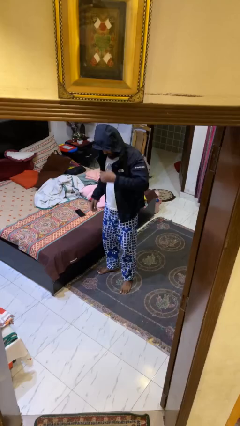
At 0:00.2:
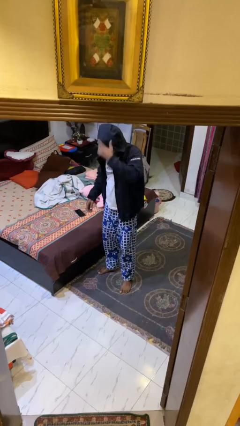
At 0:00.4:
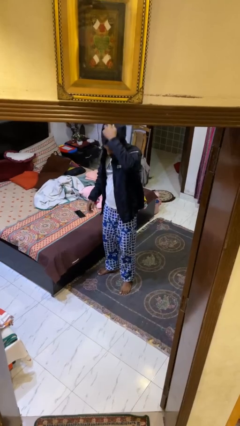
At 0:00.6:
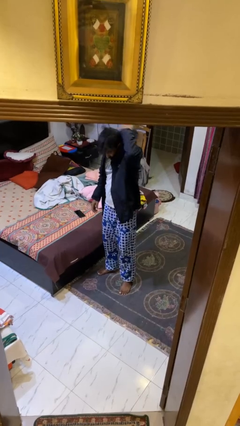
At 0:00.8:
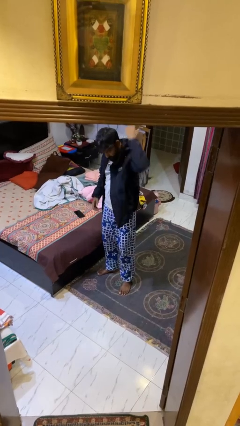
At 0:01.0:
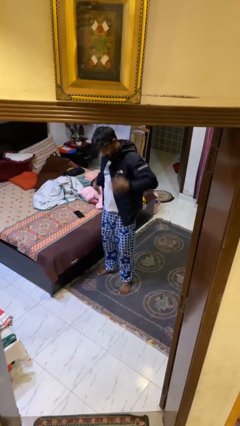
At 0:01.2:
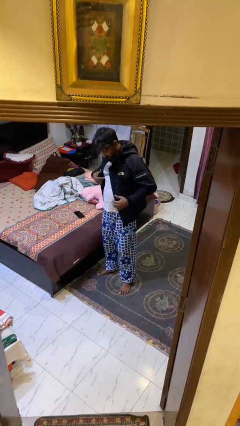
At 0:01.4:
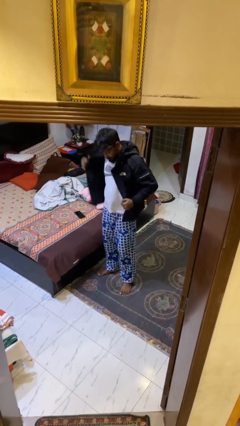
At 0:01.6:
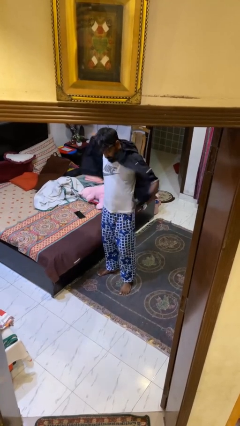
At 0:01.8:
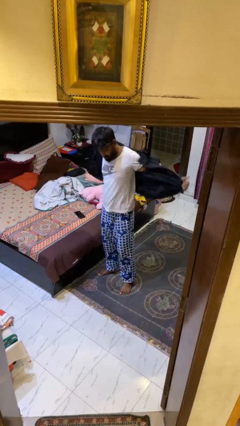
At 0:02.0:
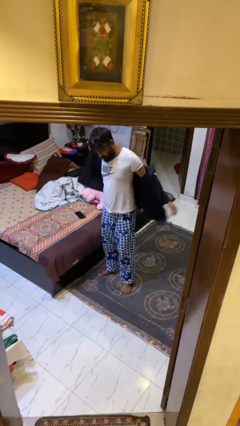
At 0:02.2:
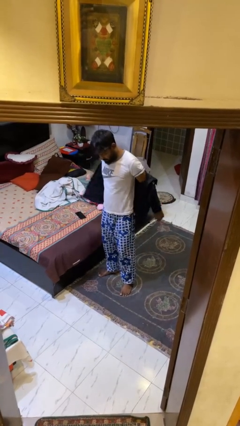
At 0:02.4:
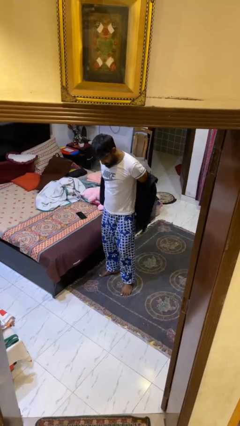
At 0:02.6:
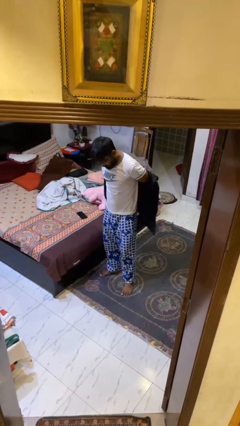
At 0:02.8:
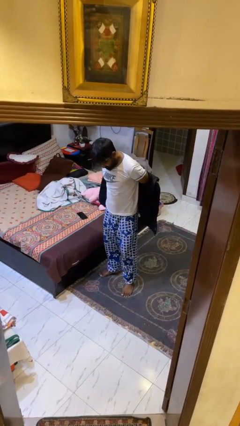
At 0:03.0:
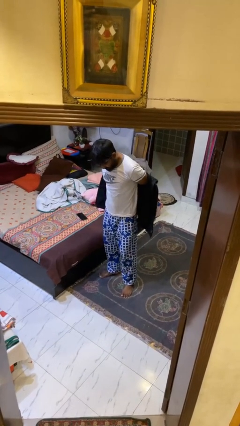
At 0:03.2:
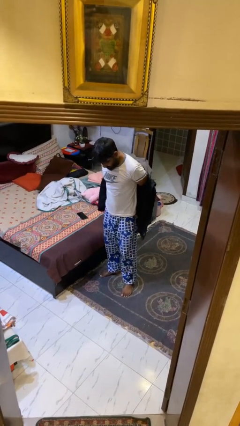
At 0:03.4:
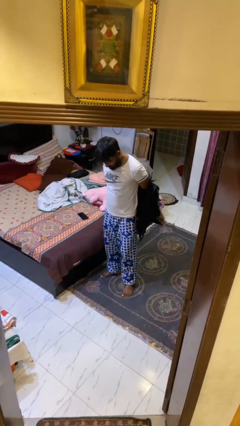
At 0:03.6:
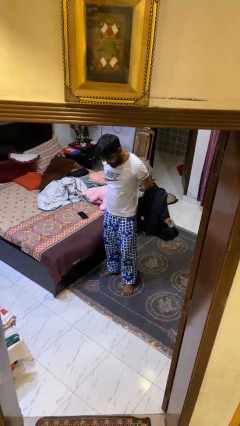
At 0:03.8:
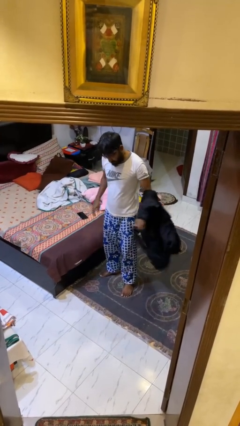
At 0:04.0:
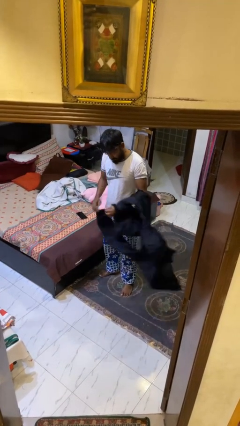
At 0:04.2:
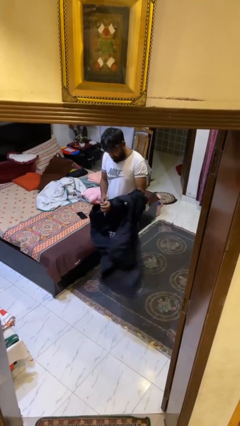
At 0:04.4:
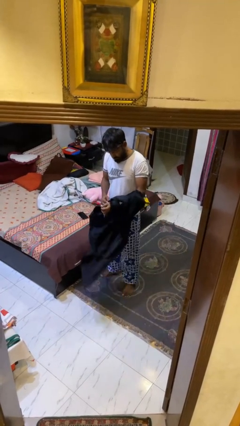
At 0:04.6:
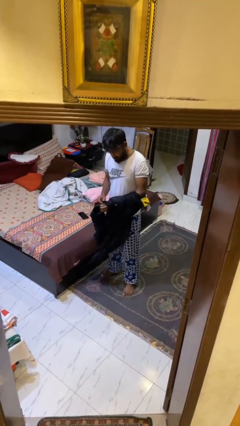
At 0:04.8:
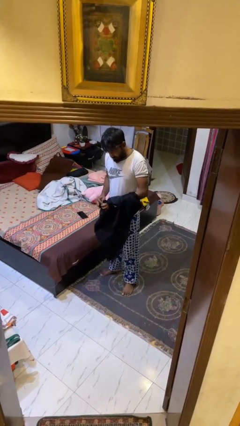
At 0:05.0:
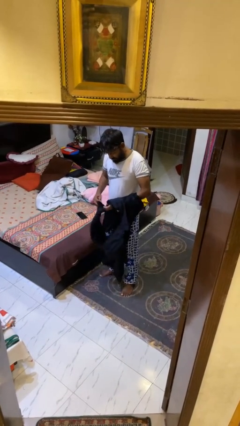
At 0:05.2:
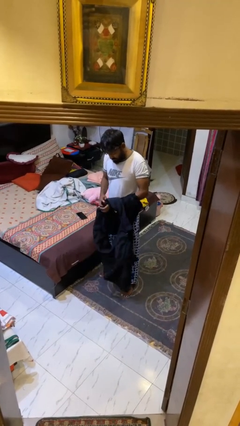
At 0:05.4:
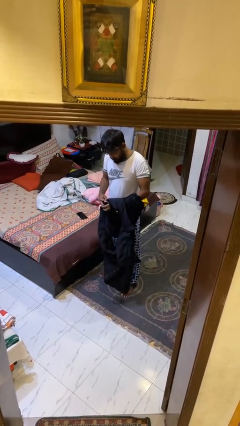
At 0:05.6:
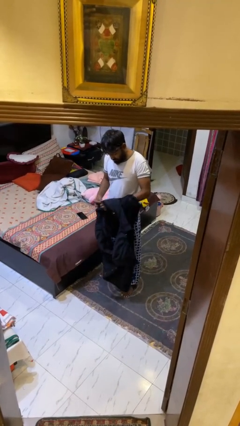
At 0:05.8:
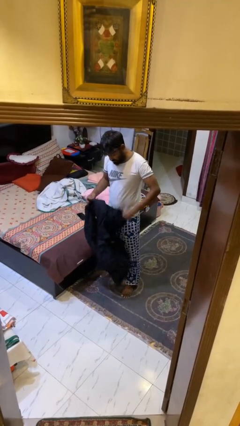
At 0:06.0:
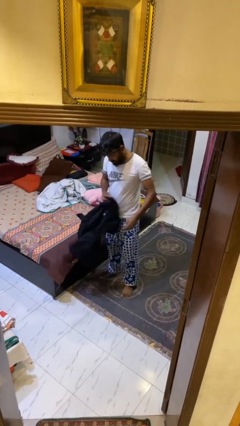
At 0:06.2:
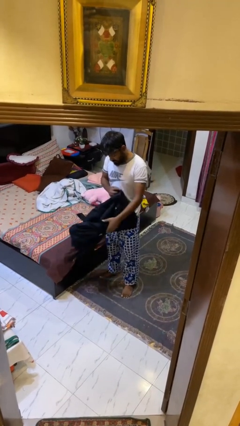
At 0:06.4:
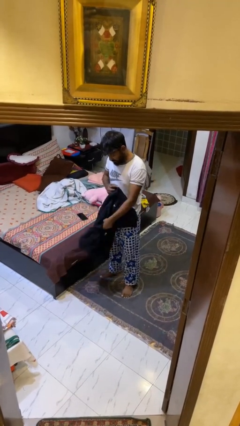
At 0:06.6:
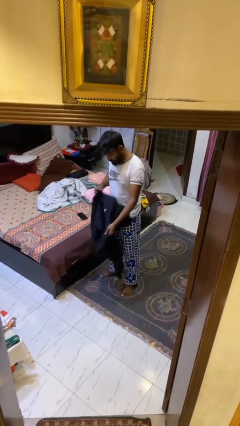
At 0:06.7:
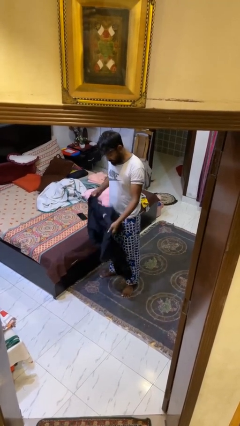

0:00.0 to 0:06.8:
person takes off hoodie

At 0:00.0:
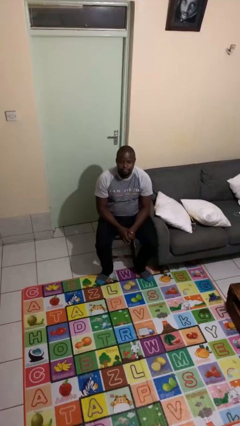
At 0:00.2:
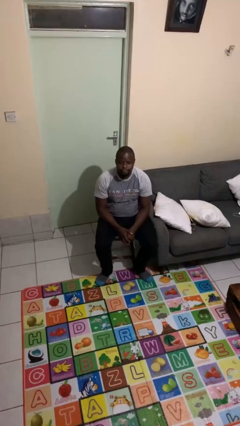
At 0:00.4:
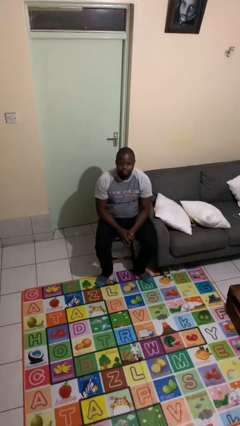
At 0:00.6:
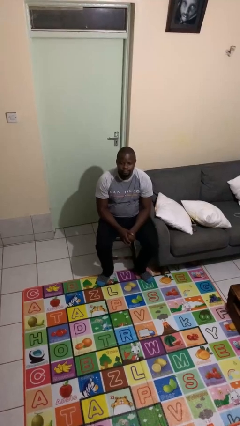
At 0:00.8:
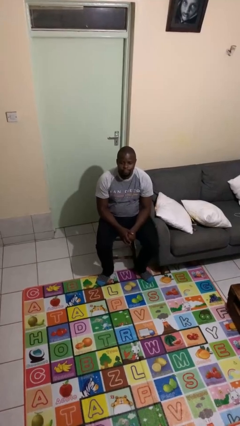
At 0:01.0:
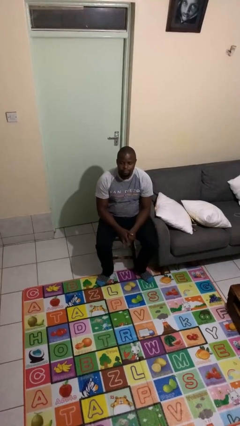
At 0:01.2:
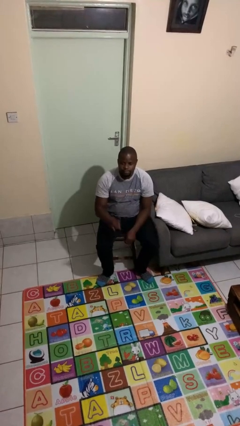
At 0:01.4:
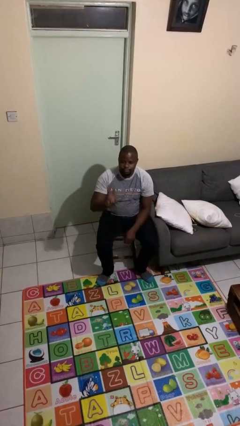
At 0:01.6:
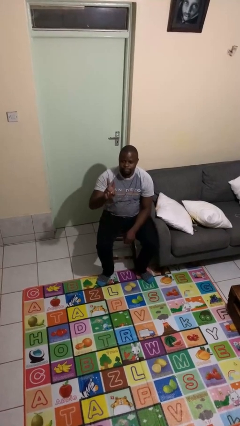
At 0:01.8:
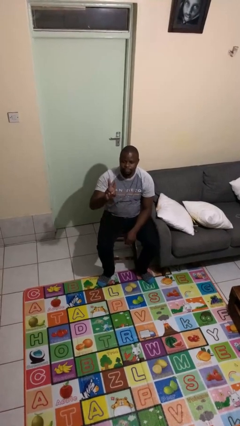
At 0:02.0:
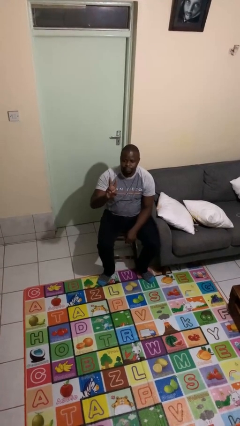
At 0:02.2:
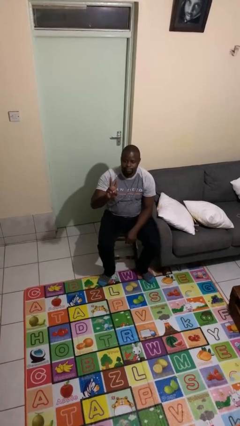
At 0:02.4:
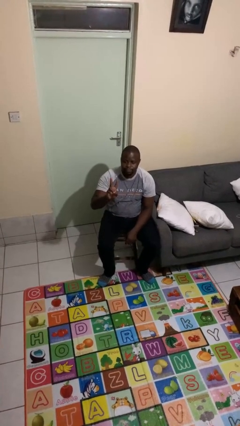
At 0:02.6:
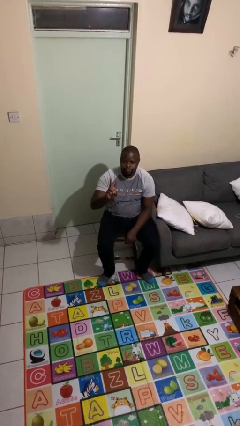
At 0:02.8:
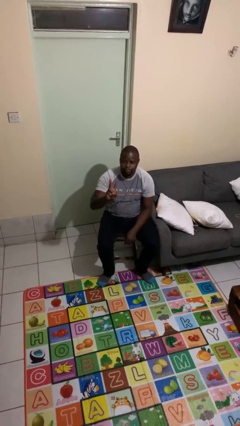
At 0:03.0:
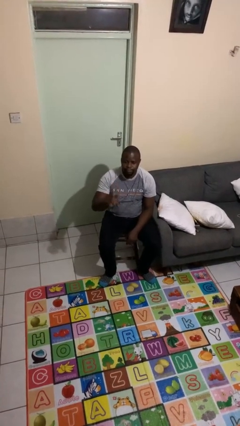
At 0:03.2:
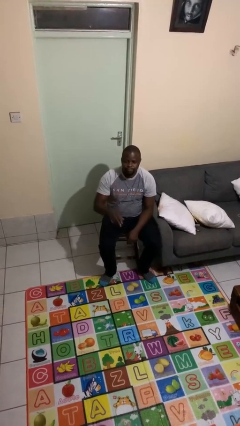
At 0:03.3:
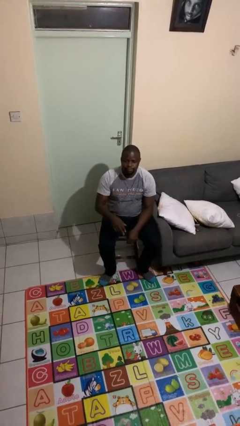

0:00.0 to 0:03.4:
person gestures peace

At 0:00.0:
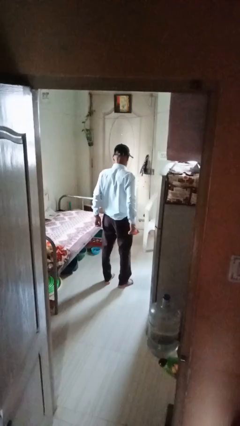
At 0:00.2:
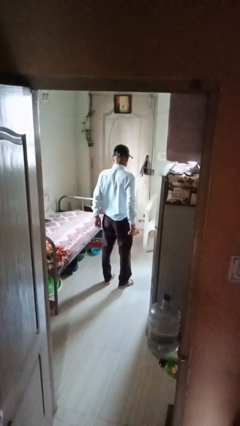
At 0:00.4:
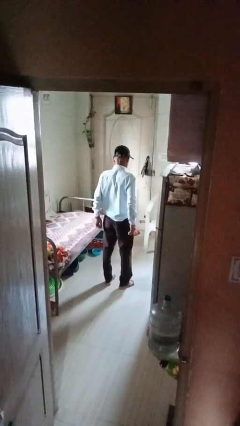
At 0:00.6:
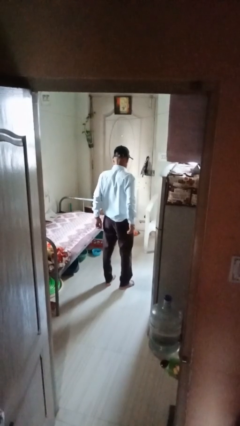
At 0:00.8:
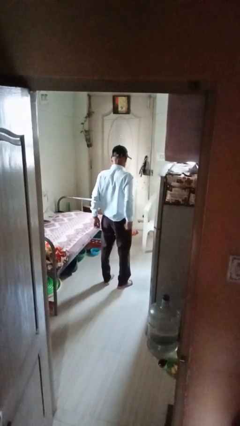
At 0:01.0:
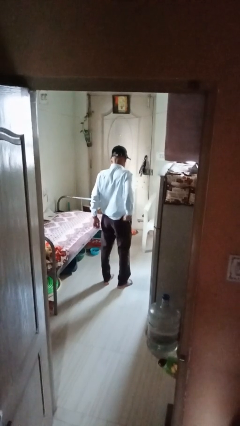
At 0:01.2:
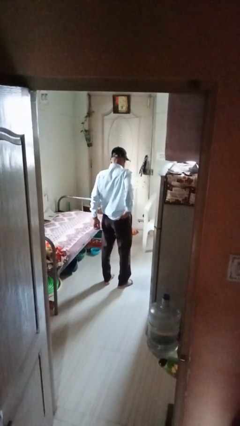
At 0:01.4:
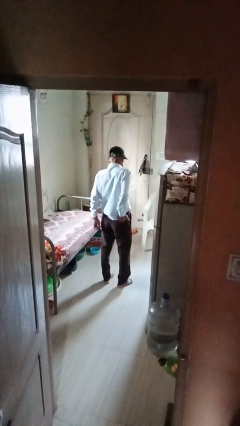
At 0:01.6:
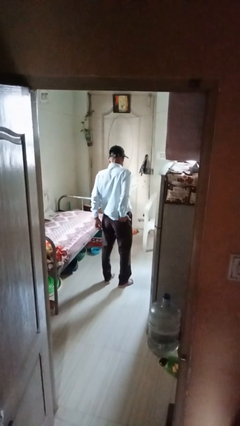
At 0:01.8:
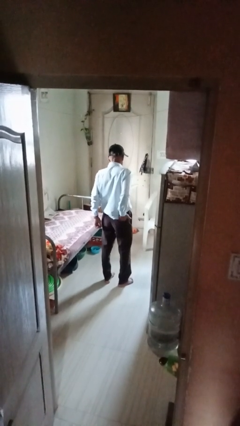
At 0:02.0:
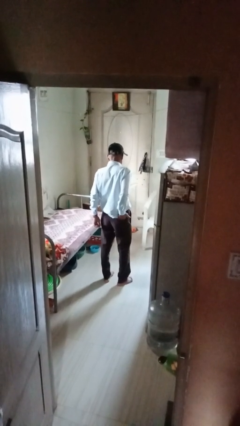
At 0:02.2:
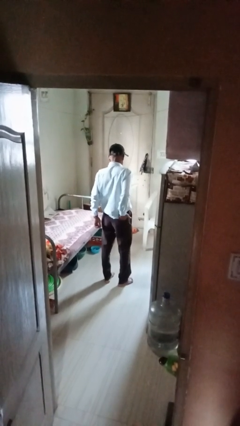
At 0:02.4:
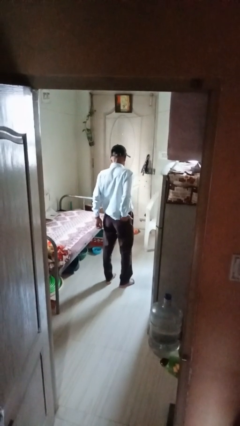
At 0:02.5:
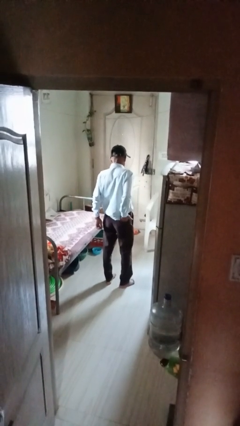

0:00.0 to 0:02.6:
person puts hands in back pockets

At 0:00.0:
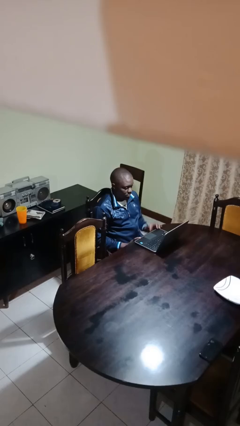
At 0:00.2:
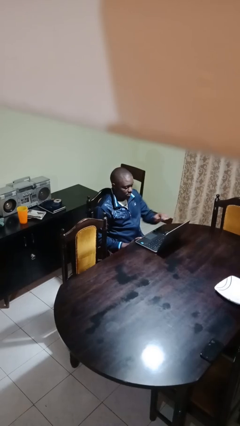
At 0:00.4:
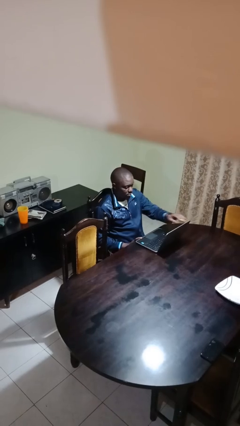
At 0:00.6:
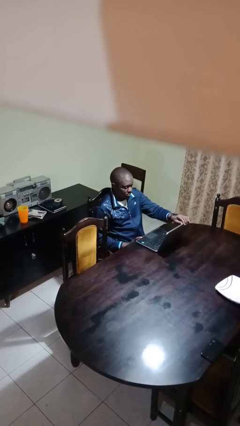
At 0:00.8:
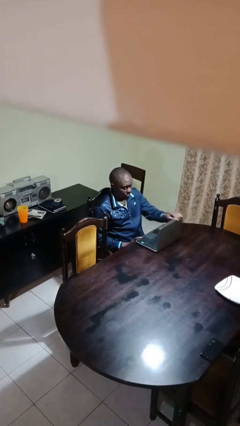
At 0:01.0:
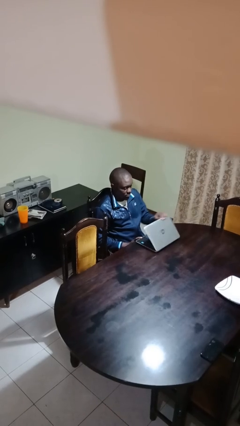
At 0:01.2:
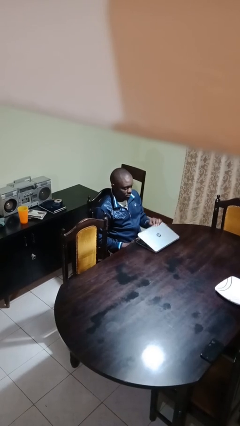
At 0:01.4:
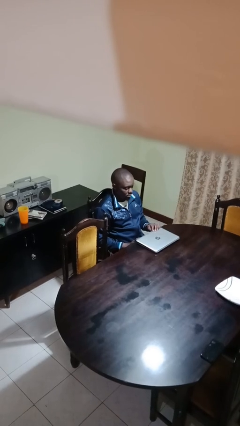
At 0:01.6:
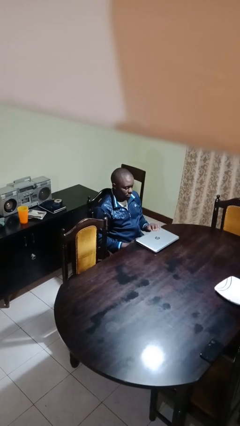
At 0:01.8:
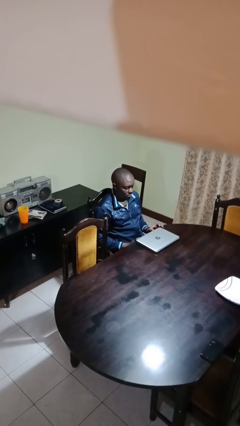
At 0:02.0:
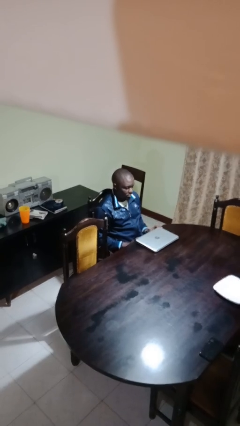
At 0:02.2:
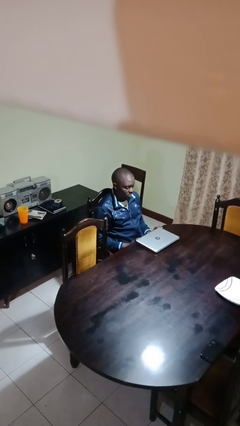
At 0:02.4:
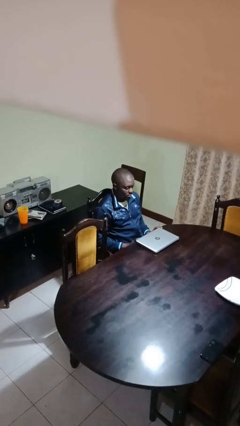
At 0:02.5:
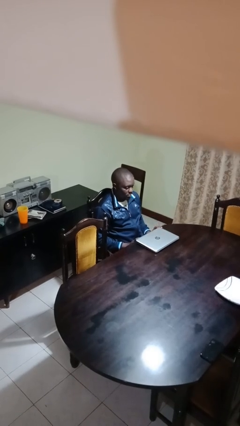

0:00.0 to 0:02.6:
person closes laptop

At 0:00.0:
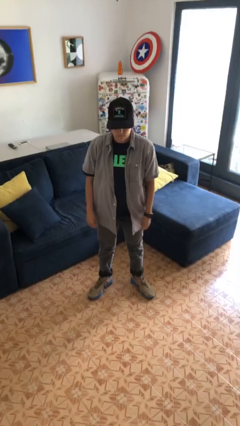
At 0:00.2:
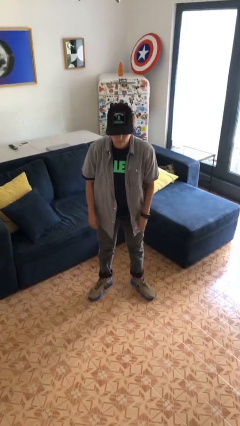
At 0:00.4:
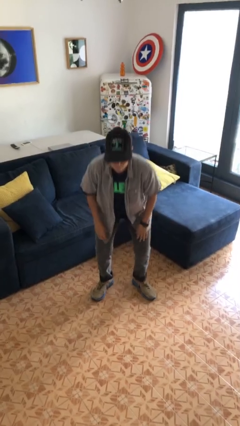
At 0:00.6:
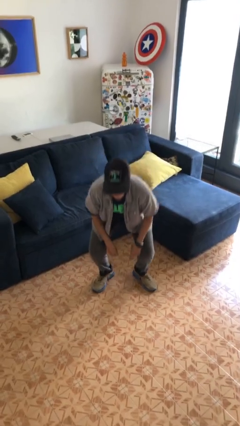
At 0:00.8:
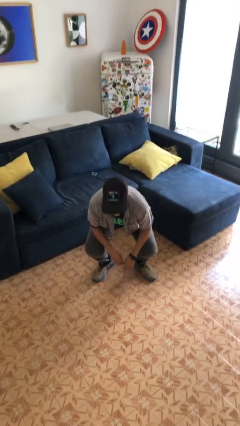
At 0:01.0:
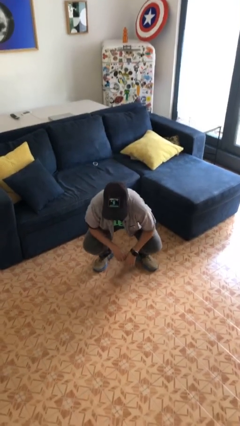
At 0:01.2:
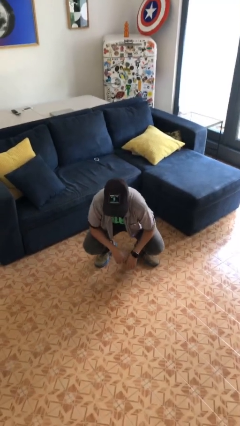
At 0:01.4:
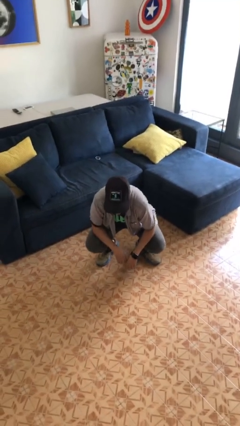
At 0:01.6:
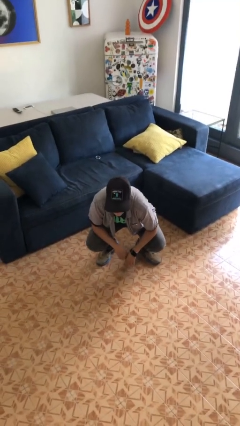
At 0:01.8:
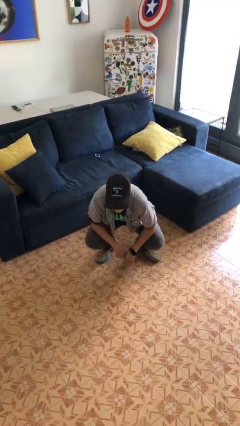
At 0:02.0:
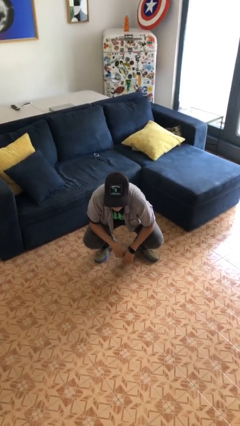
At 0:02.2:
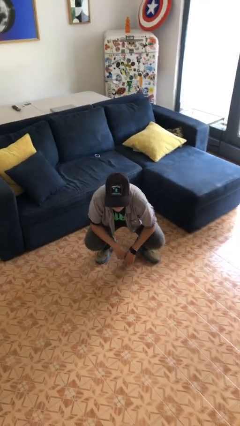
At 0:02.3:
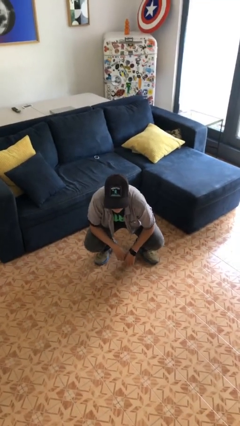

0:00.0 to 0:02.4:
person squats
